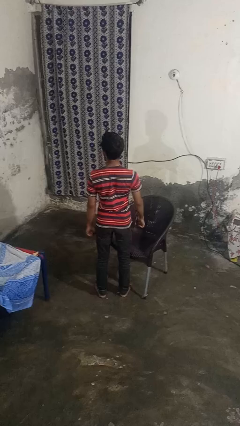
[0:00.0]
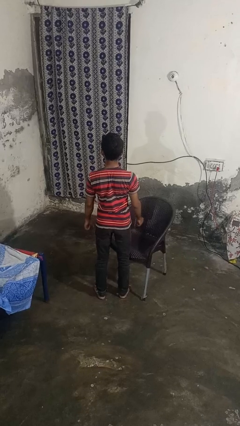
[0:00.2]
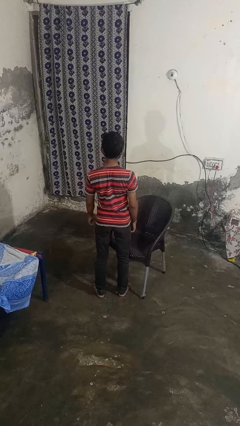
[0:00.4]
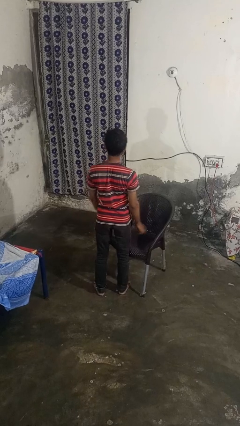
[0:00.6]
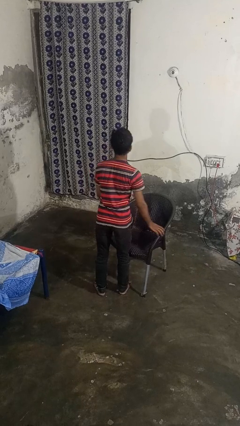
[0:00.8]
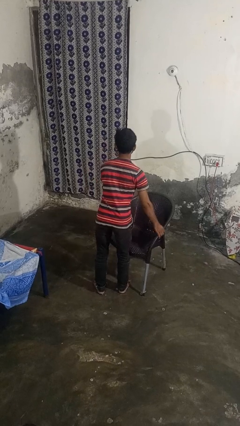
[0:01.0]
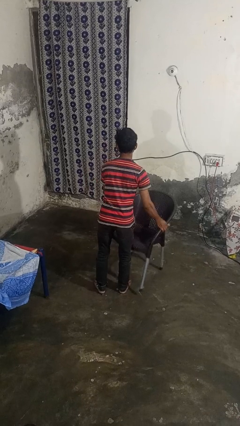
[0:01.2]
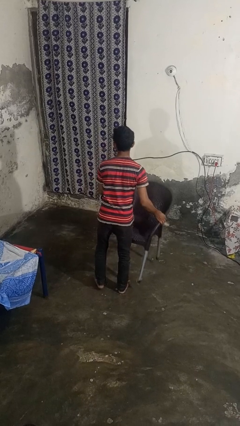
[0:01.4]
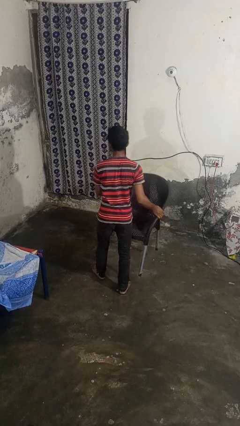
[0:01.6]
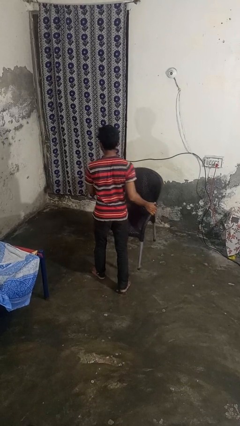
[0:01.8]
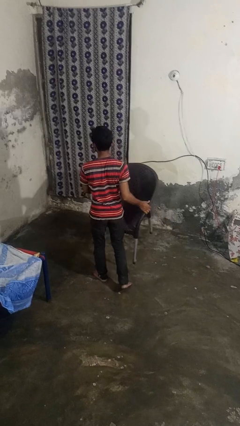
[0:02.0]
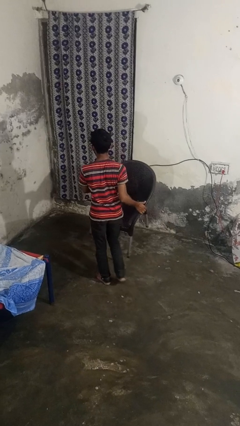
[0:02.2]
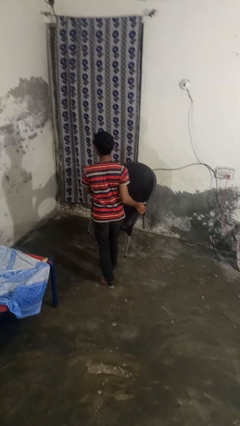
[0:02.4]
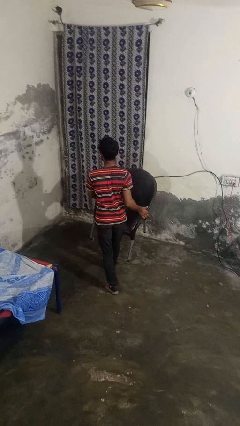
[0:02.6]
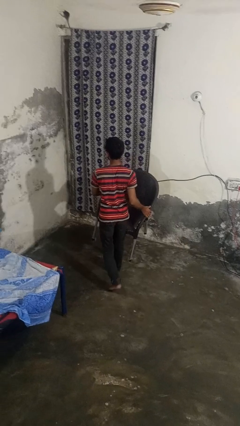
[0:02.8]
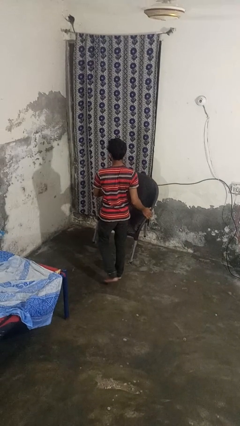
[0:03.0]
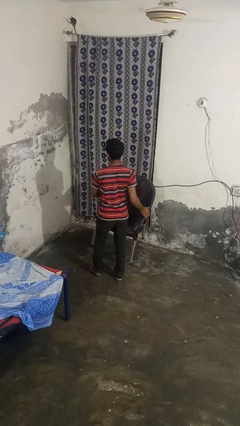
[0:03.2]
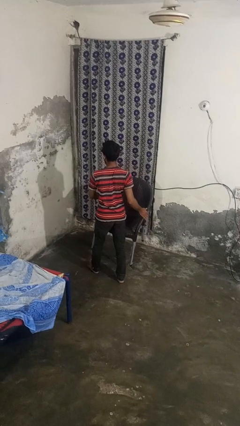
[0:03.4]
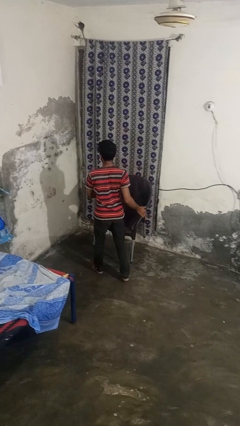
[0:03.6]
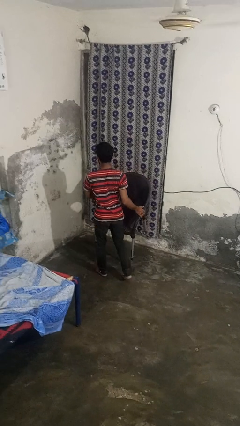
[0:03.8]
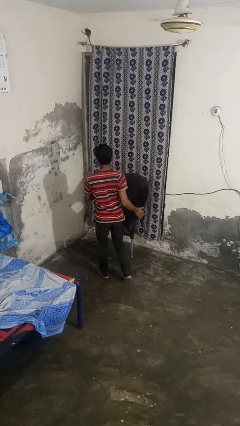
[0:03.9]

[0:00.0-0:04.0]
person carries furniture

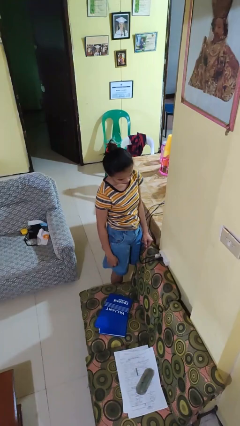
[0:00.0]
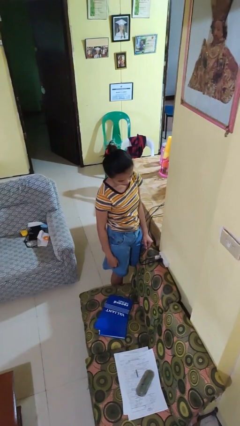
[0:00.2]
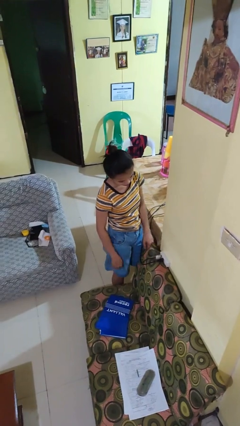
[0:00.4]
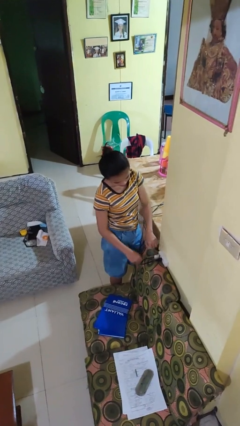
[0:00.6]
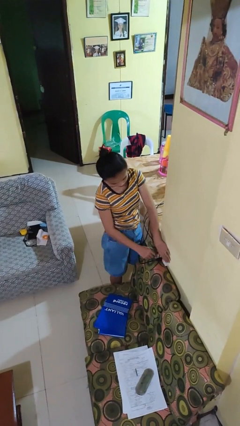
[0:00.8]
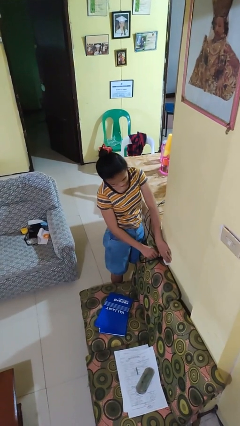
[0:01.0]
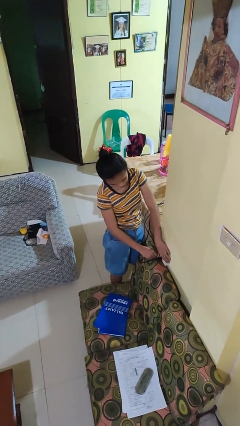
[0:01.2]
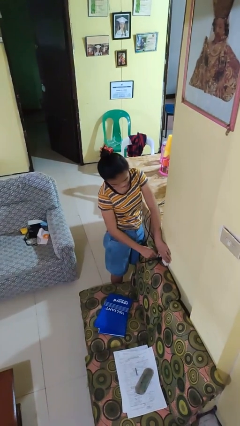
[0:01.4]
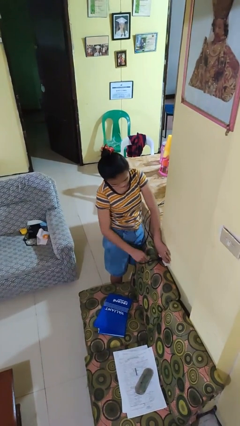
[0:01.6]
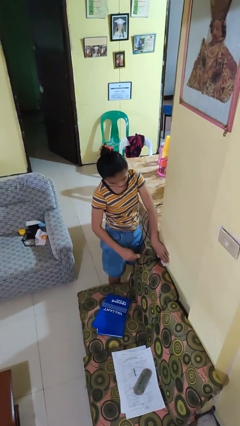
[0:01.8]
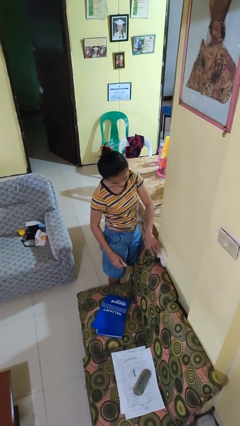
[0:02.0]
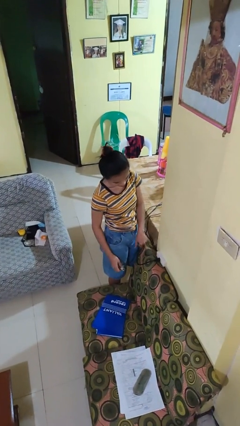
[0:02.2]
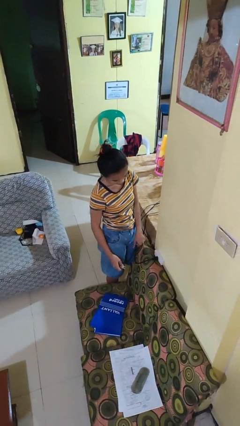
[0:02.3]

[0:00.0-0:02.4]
person unplugs from electrical socket

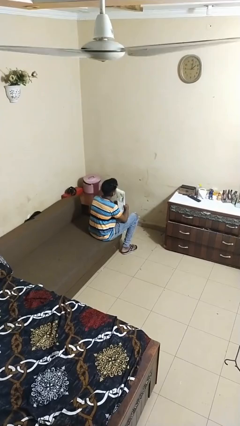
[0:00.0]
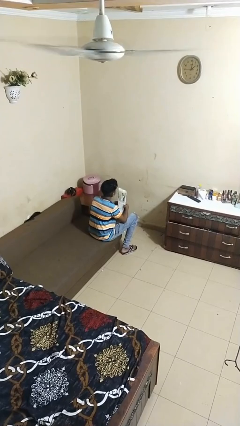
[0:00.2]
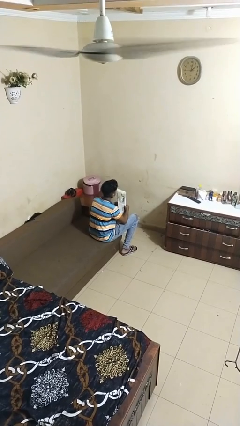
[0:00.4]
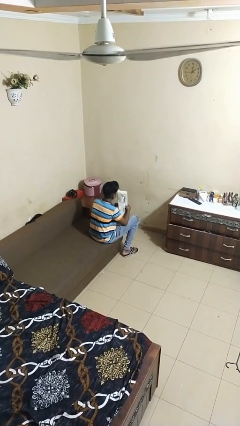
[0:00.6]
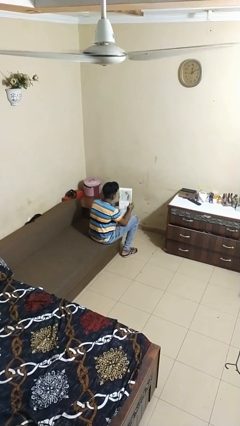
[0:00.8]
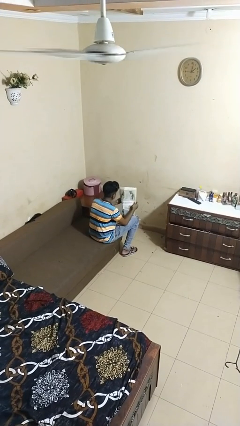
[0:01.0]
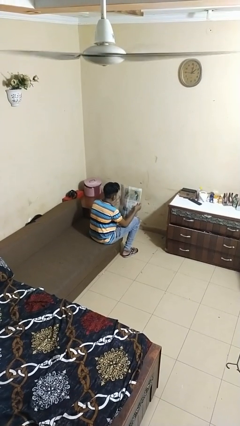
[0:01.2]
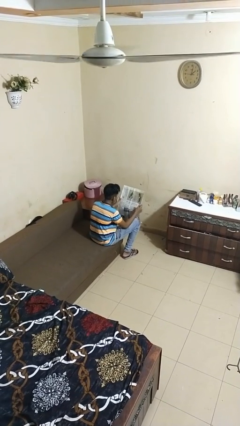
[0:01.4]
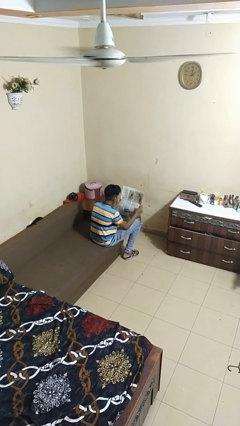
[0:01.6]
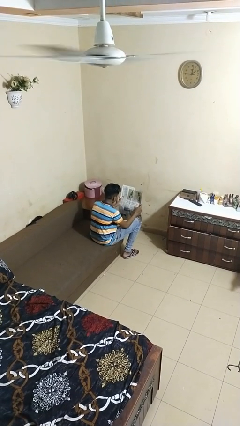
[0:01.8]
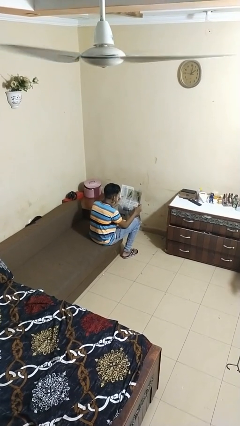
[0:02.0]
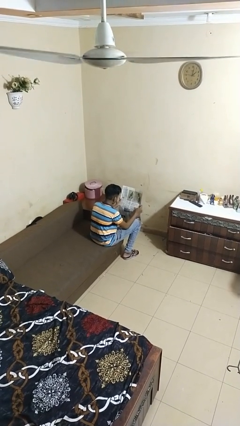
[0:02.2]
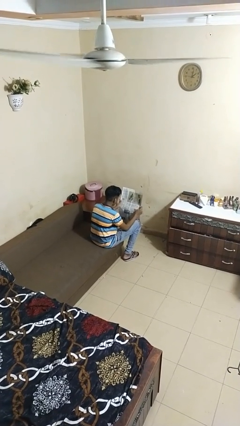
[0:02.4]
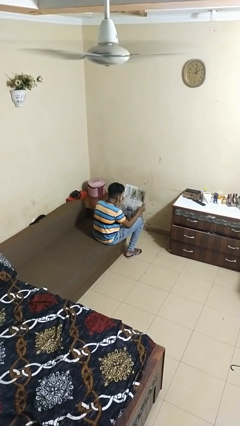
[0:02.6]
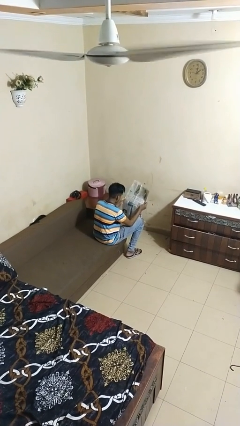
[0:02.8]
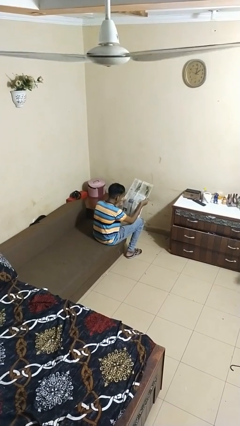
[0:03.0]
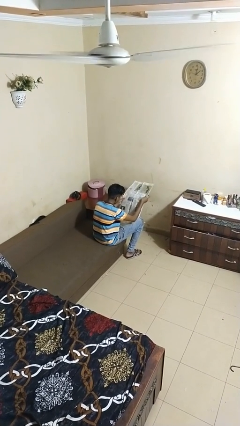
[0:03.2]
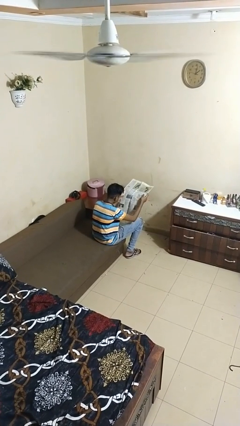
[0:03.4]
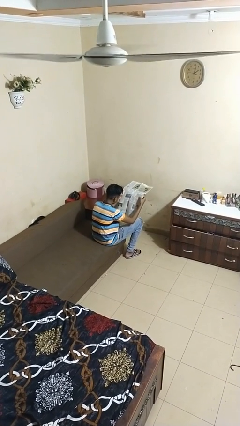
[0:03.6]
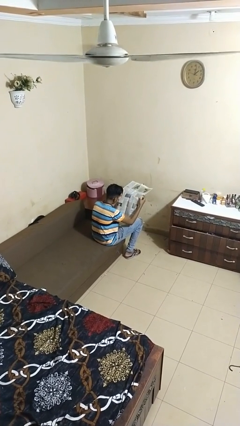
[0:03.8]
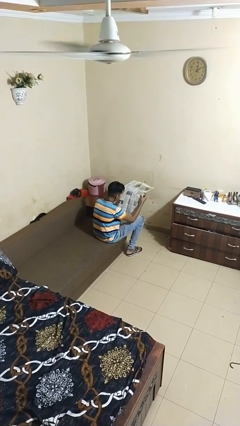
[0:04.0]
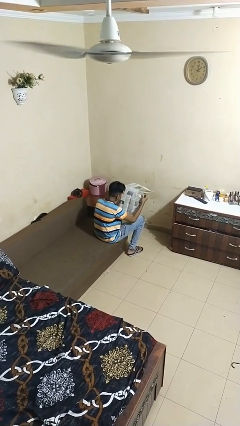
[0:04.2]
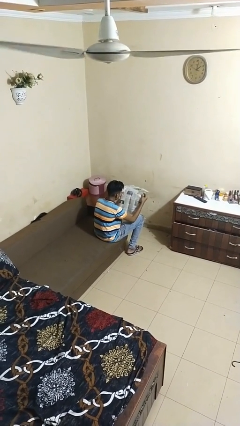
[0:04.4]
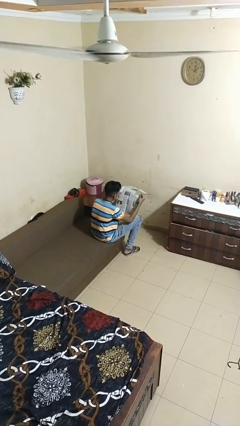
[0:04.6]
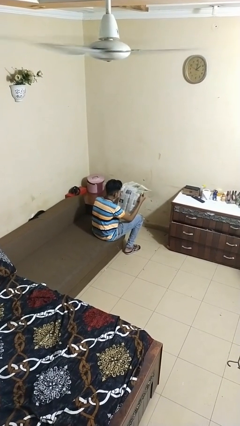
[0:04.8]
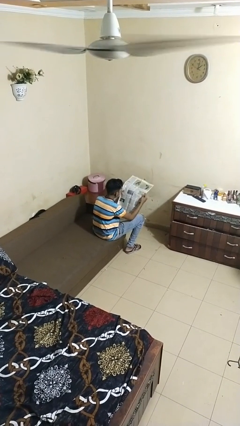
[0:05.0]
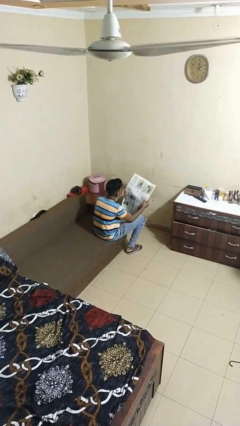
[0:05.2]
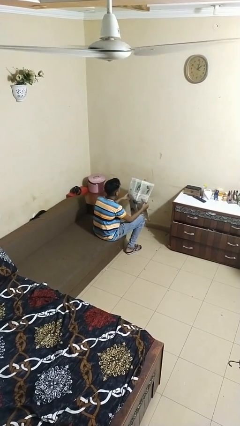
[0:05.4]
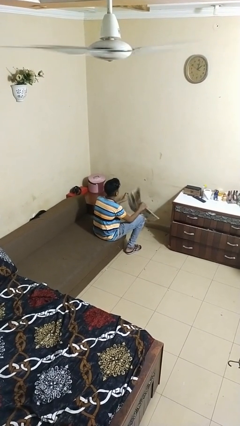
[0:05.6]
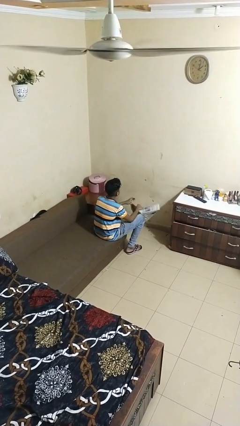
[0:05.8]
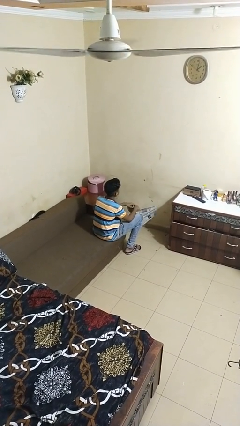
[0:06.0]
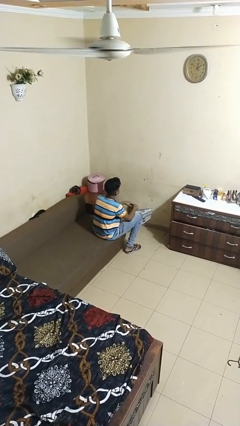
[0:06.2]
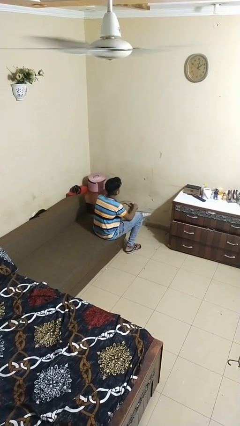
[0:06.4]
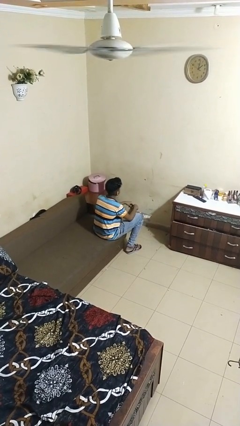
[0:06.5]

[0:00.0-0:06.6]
person reads newspaper

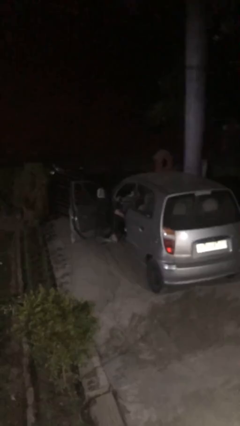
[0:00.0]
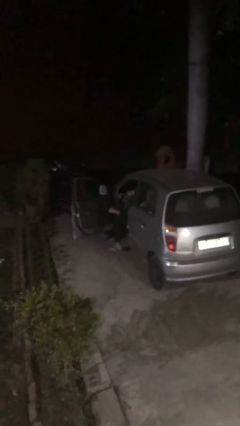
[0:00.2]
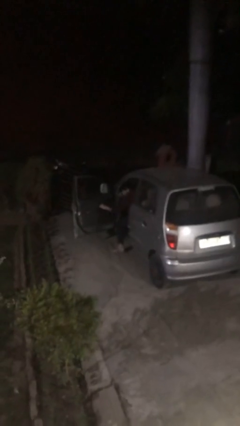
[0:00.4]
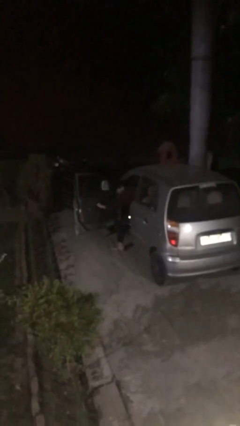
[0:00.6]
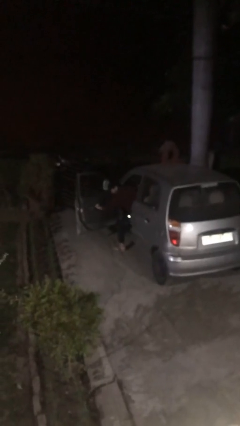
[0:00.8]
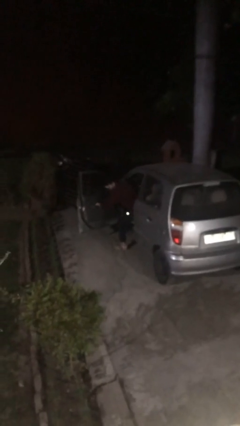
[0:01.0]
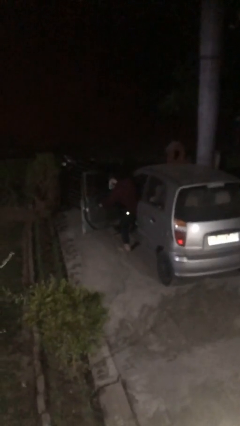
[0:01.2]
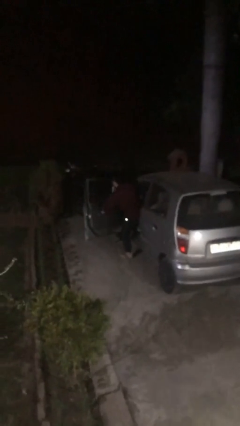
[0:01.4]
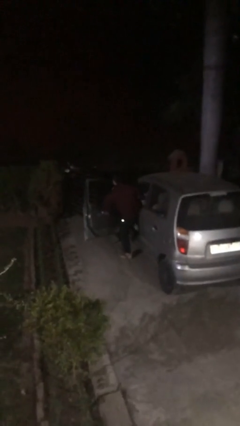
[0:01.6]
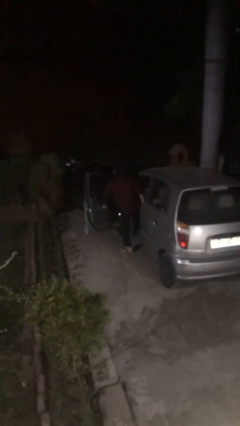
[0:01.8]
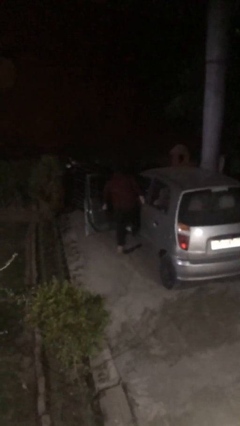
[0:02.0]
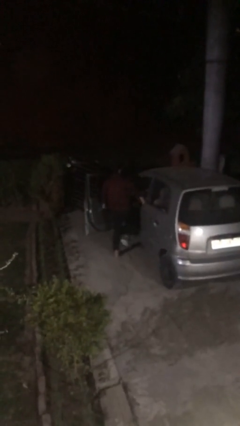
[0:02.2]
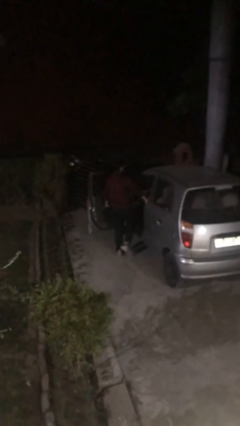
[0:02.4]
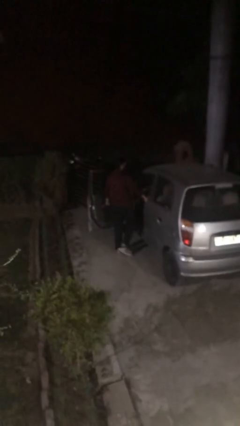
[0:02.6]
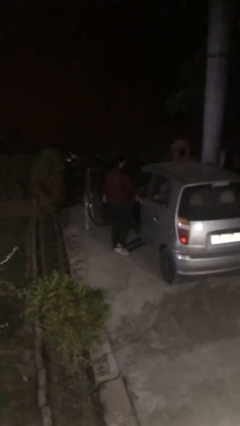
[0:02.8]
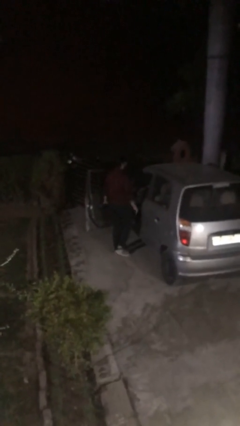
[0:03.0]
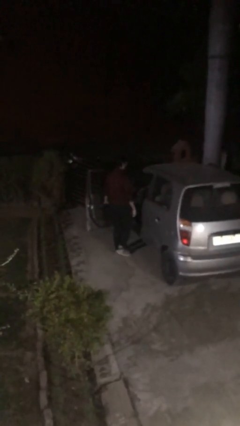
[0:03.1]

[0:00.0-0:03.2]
person exits car

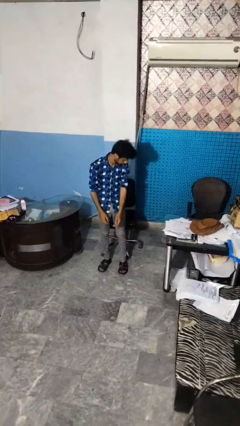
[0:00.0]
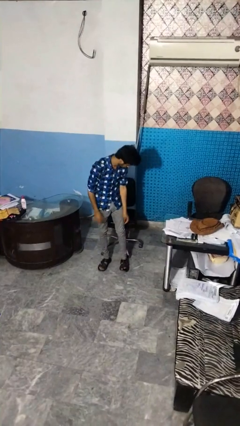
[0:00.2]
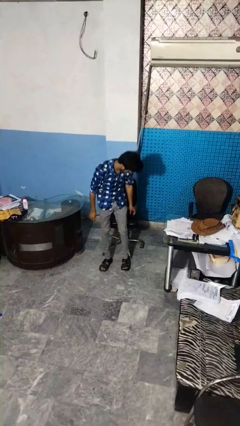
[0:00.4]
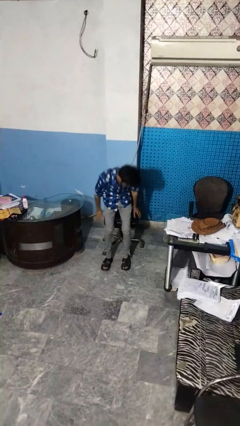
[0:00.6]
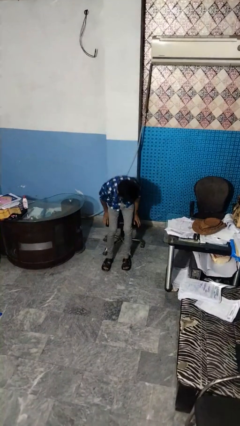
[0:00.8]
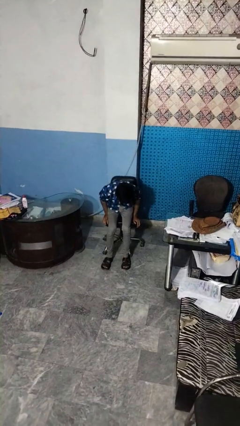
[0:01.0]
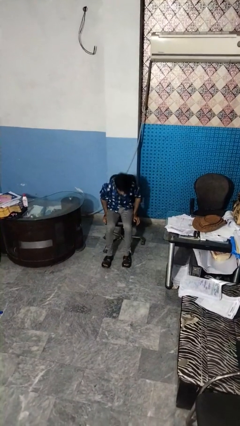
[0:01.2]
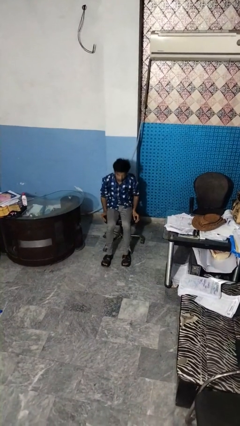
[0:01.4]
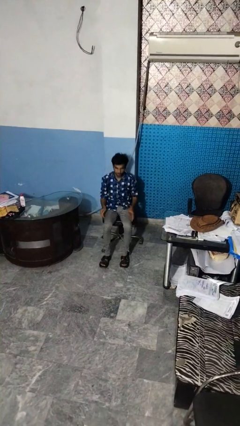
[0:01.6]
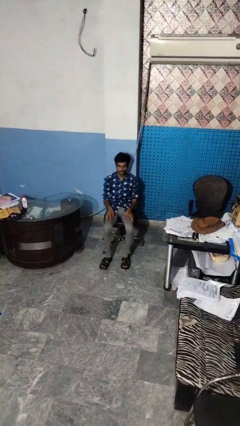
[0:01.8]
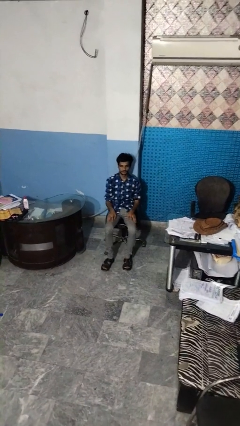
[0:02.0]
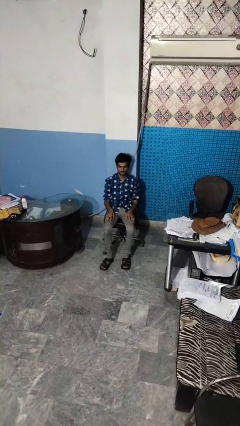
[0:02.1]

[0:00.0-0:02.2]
person sits down
